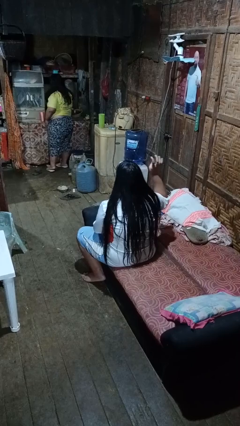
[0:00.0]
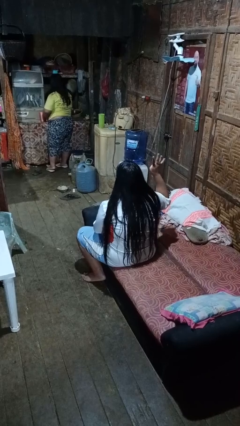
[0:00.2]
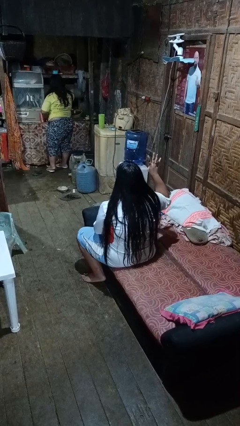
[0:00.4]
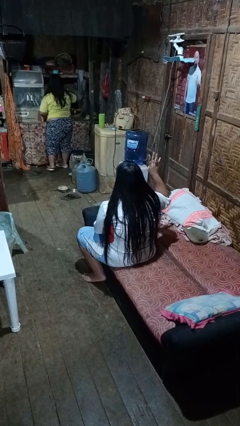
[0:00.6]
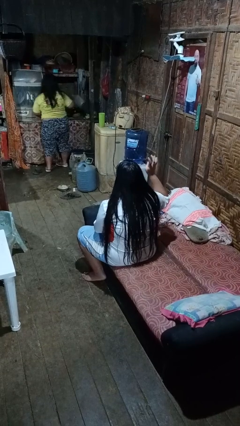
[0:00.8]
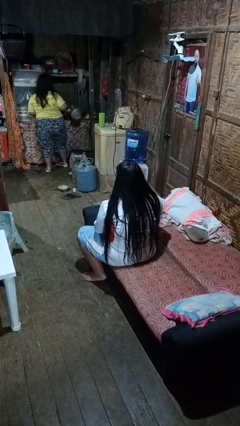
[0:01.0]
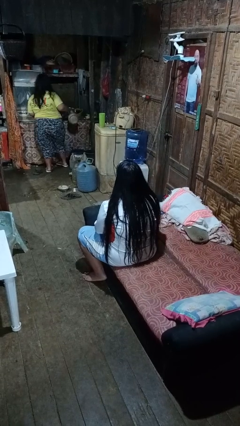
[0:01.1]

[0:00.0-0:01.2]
person gestures number four

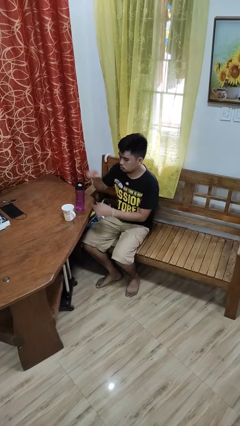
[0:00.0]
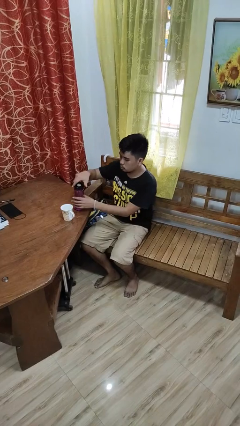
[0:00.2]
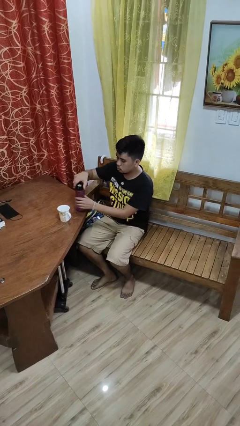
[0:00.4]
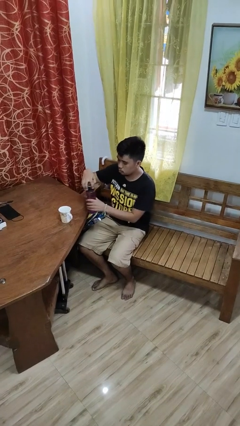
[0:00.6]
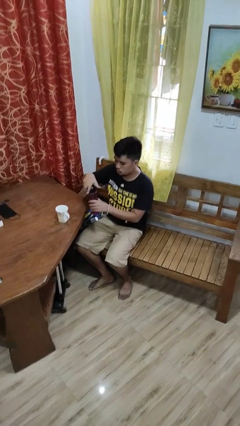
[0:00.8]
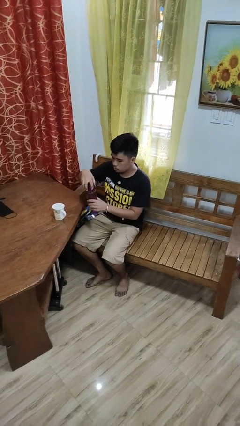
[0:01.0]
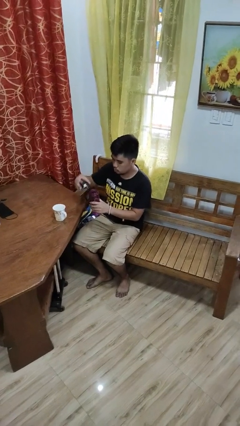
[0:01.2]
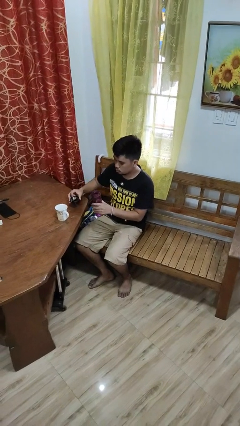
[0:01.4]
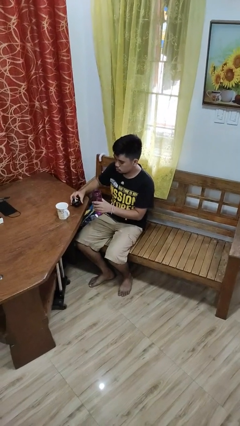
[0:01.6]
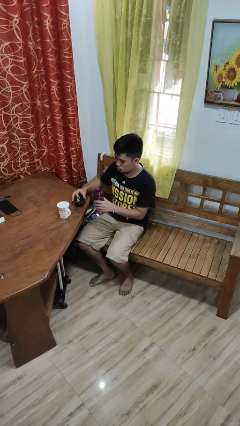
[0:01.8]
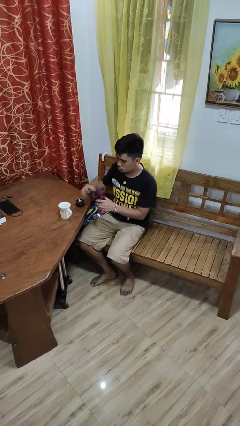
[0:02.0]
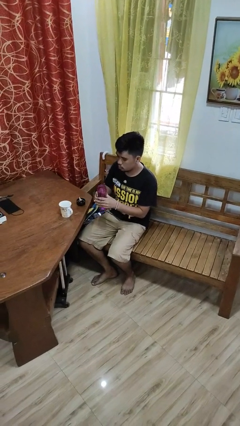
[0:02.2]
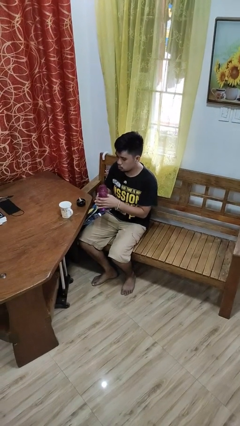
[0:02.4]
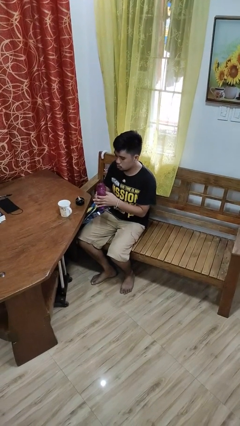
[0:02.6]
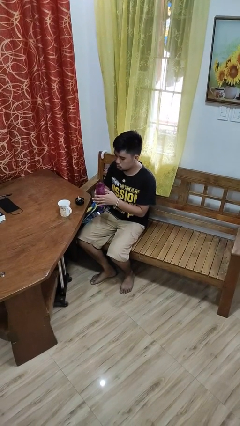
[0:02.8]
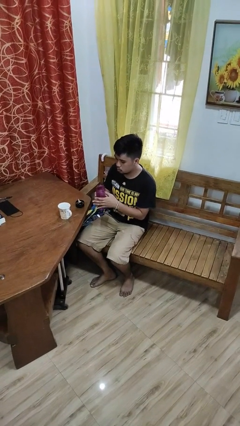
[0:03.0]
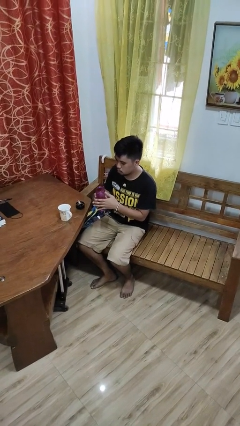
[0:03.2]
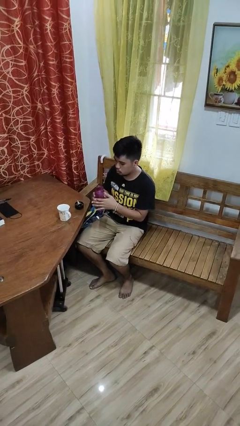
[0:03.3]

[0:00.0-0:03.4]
person unscrews lid from bottle

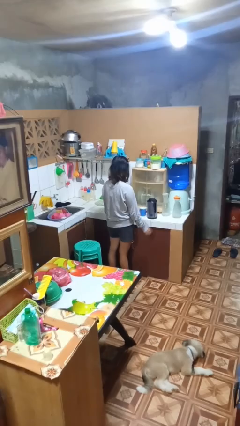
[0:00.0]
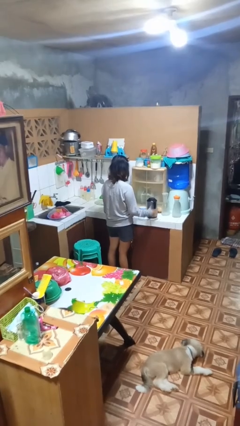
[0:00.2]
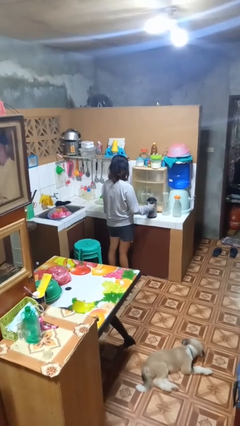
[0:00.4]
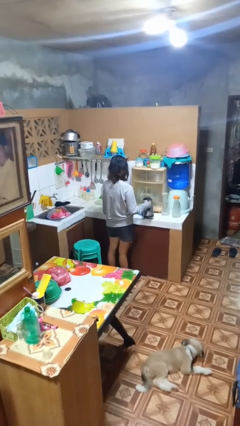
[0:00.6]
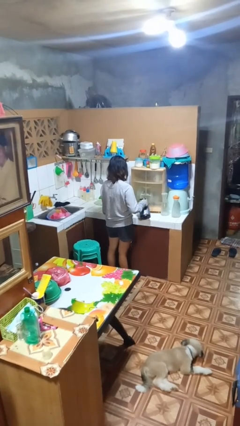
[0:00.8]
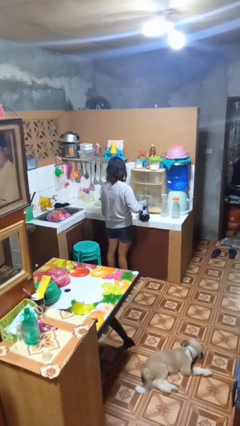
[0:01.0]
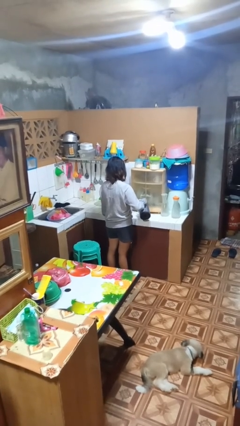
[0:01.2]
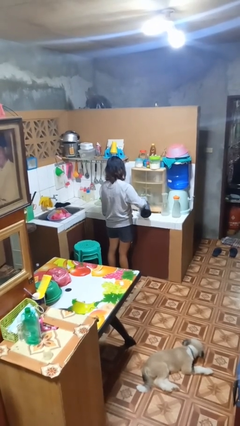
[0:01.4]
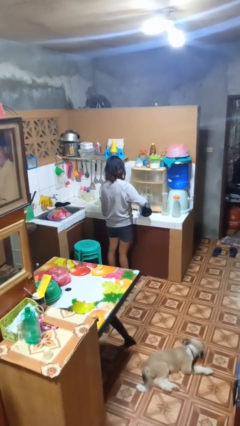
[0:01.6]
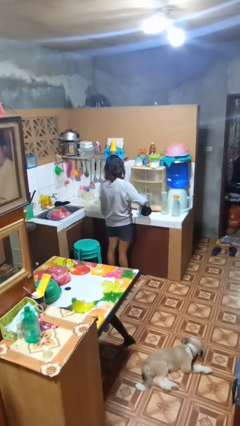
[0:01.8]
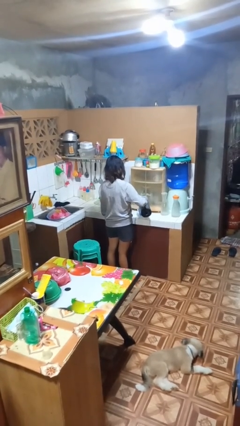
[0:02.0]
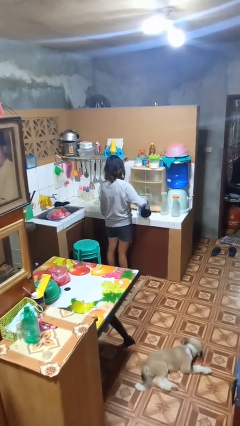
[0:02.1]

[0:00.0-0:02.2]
person pours coffee into mug

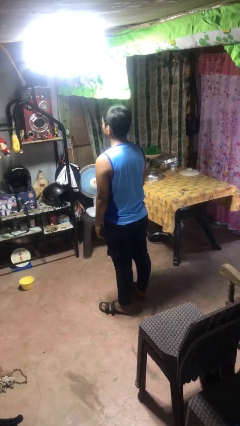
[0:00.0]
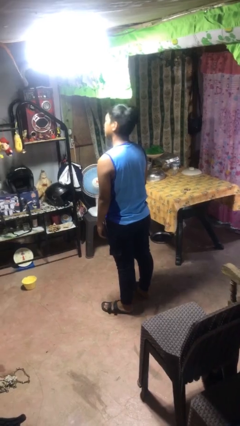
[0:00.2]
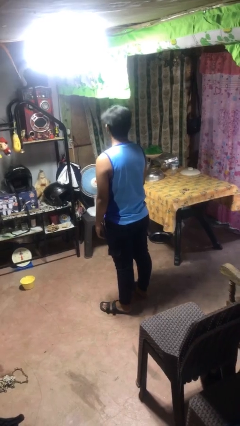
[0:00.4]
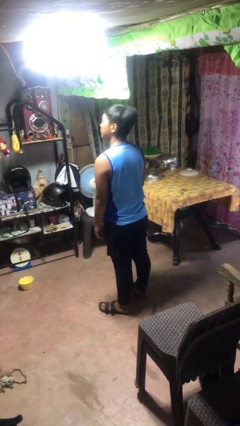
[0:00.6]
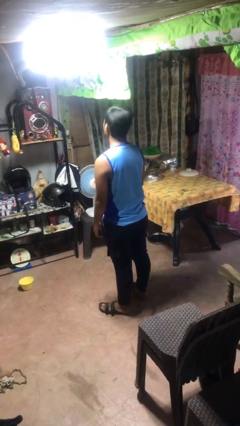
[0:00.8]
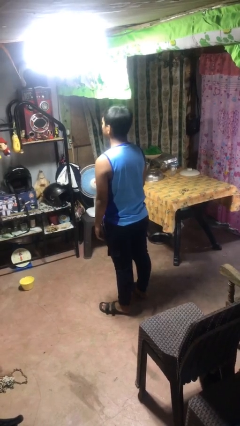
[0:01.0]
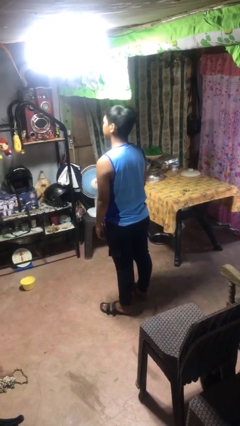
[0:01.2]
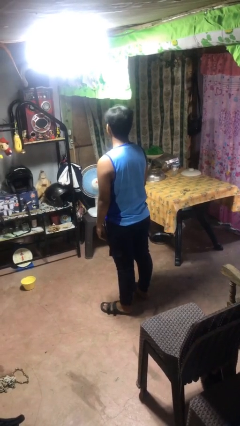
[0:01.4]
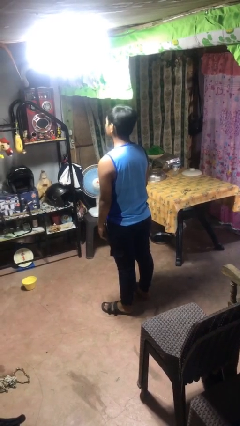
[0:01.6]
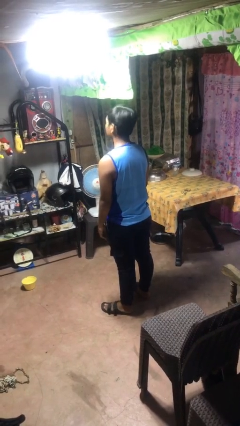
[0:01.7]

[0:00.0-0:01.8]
person shakes head

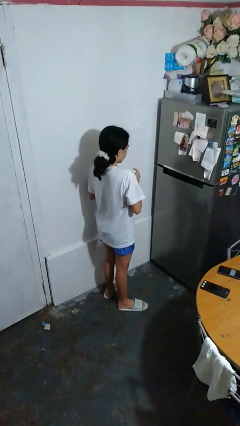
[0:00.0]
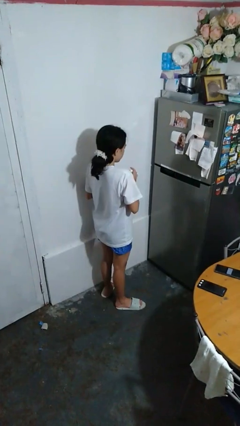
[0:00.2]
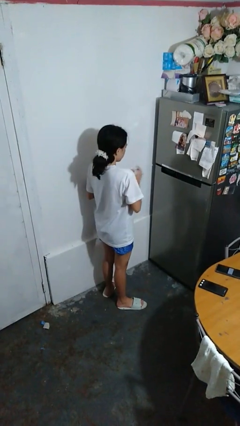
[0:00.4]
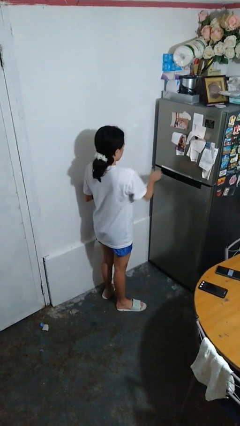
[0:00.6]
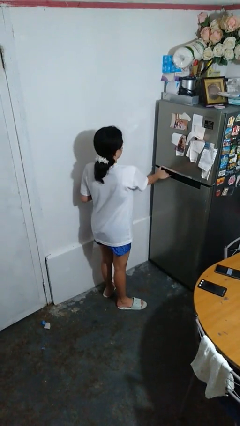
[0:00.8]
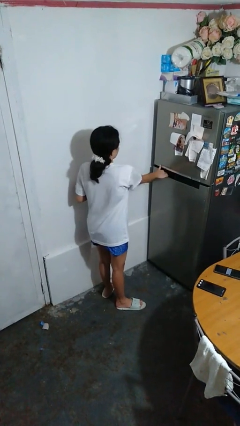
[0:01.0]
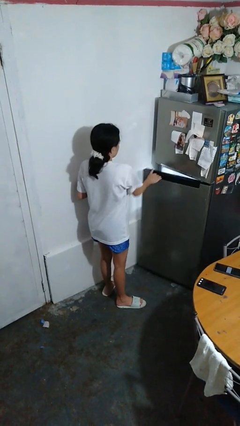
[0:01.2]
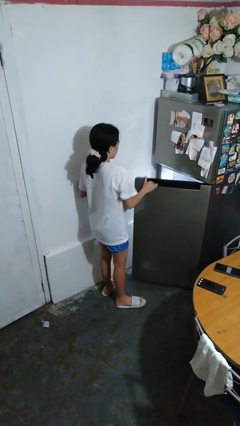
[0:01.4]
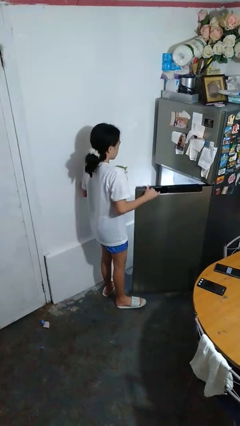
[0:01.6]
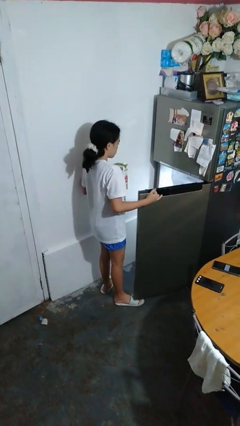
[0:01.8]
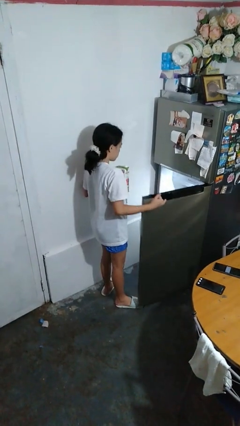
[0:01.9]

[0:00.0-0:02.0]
person opens refrigerator

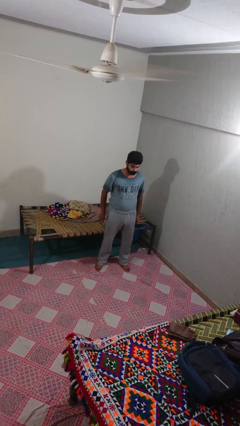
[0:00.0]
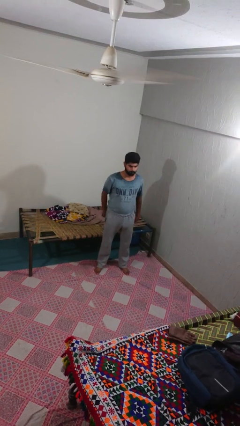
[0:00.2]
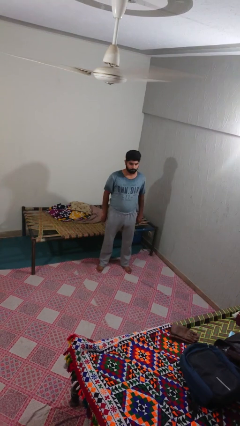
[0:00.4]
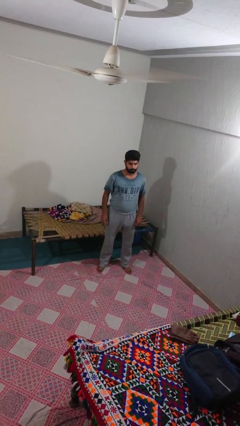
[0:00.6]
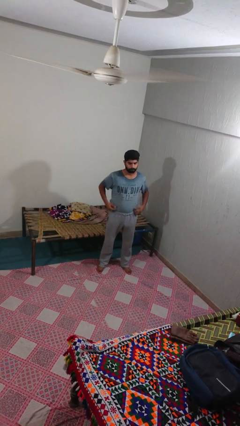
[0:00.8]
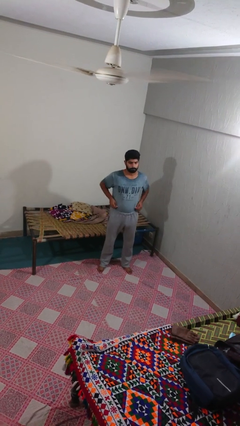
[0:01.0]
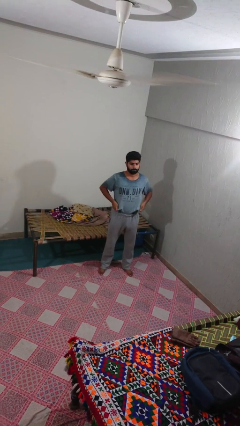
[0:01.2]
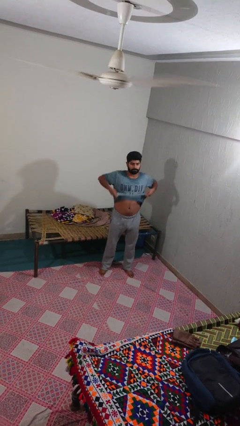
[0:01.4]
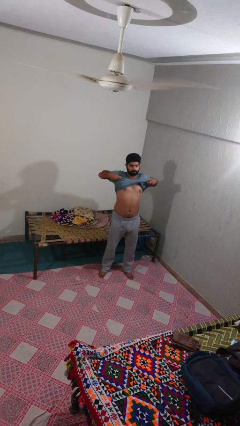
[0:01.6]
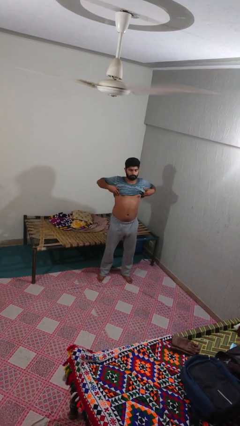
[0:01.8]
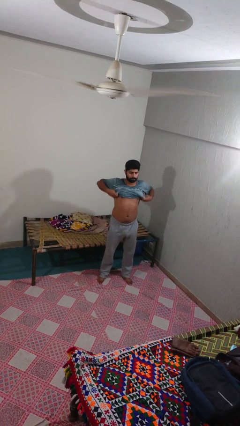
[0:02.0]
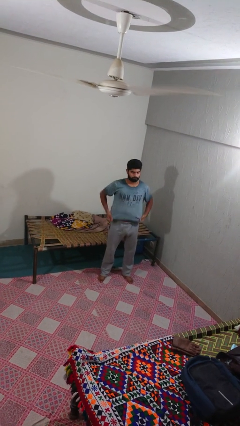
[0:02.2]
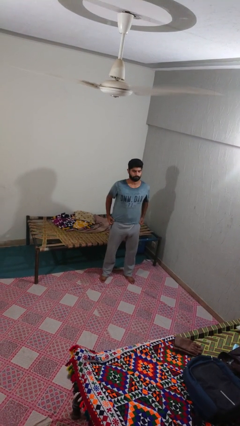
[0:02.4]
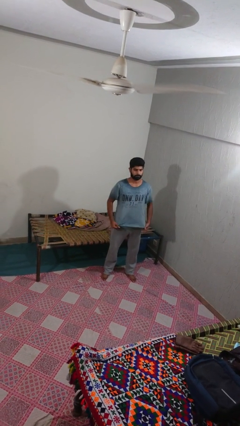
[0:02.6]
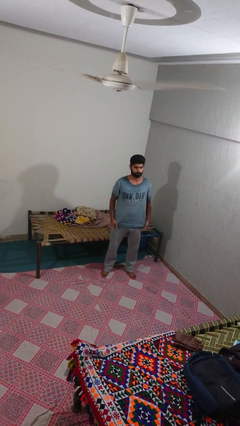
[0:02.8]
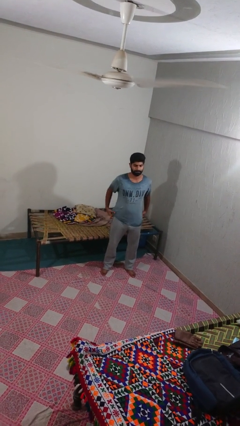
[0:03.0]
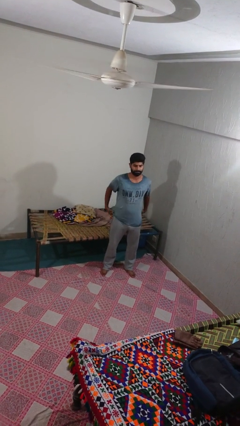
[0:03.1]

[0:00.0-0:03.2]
person untucks shirt

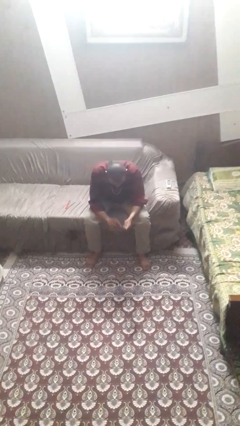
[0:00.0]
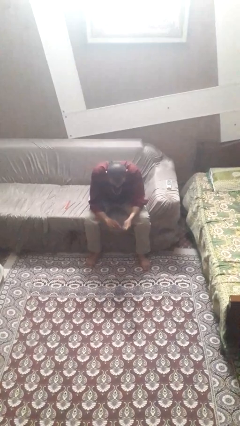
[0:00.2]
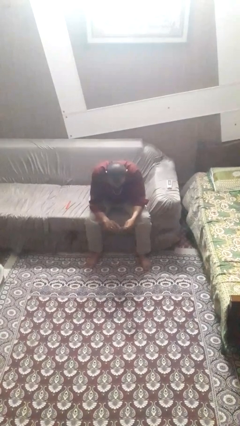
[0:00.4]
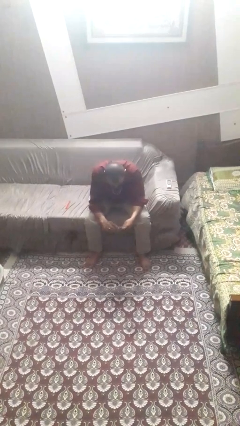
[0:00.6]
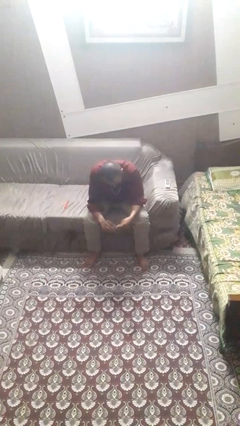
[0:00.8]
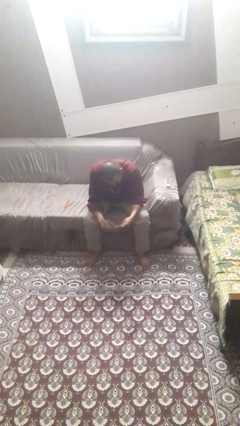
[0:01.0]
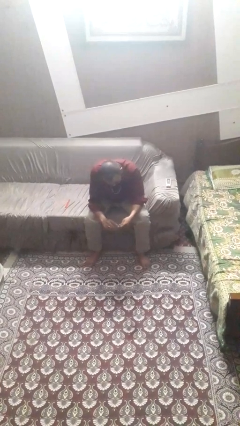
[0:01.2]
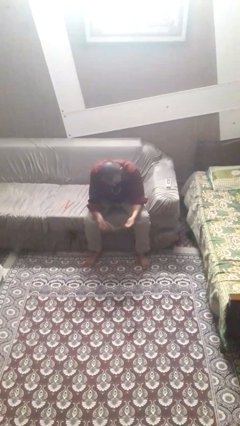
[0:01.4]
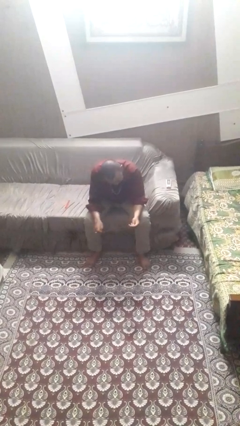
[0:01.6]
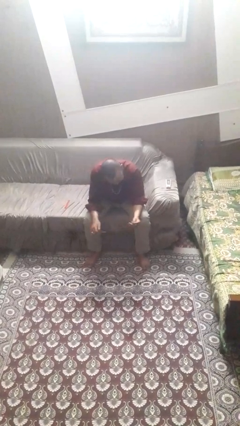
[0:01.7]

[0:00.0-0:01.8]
person files fingernails

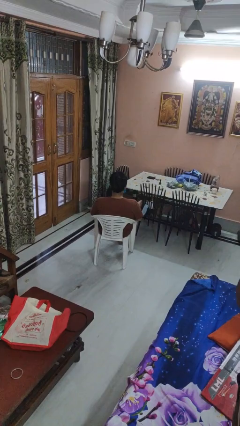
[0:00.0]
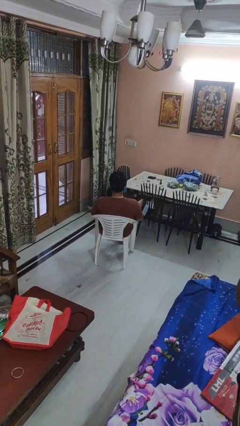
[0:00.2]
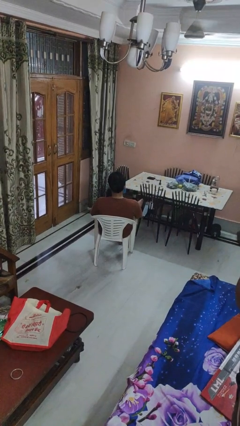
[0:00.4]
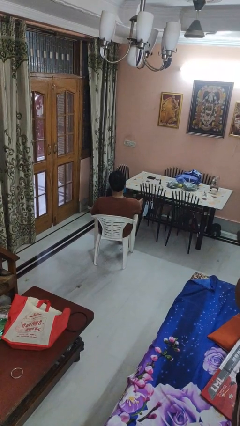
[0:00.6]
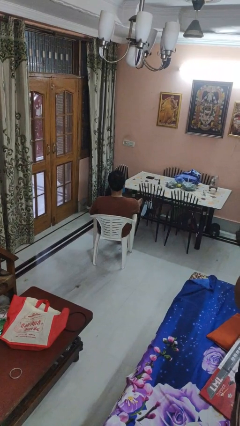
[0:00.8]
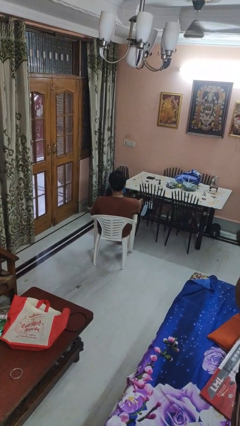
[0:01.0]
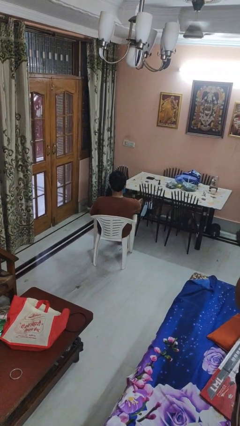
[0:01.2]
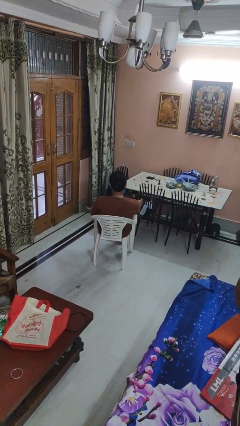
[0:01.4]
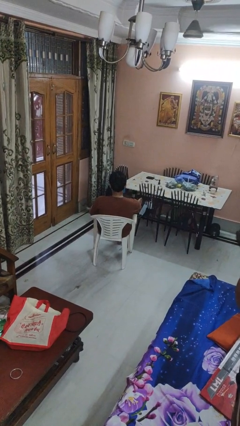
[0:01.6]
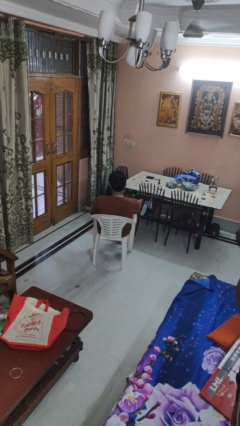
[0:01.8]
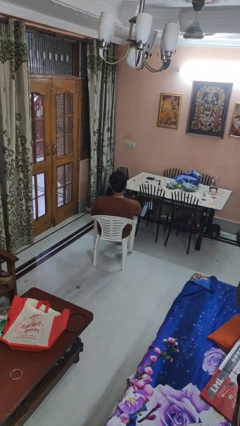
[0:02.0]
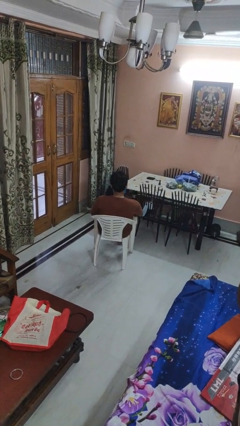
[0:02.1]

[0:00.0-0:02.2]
person rubs foot
